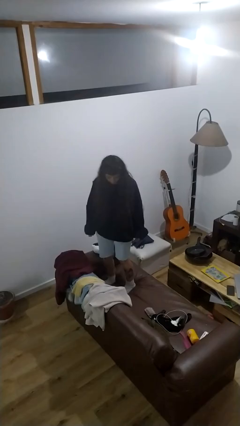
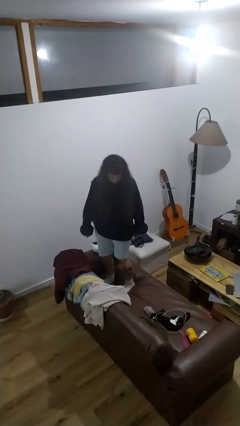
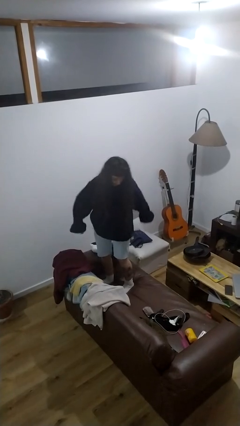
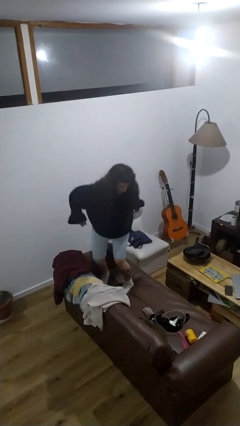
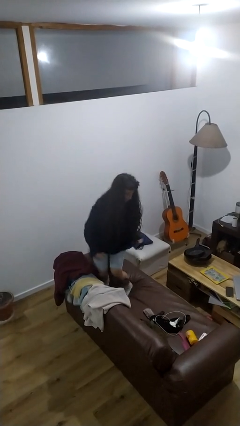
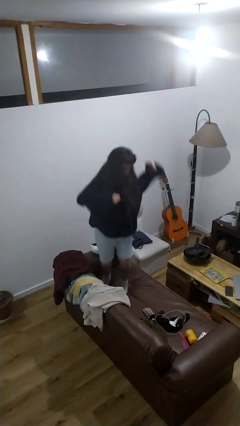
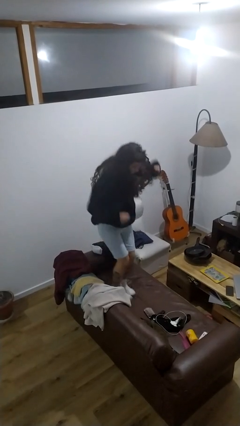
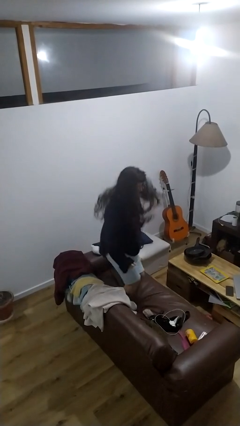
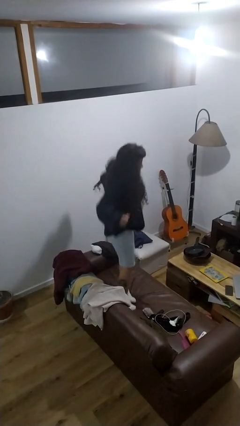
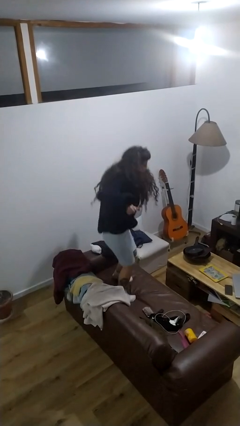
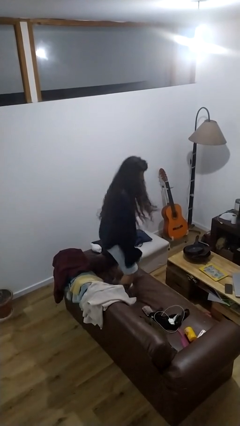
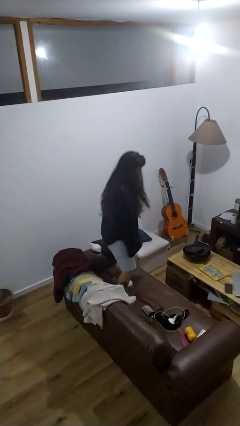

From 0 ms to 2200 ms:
person jumps on couch

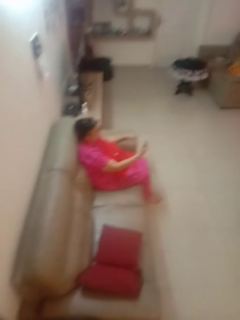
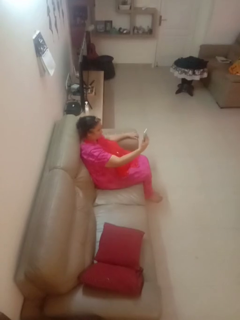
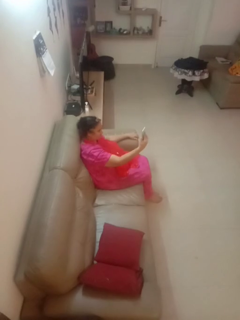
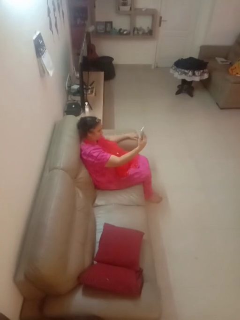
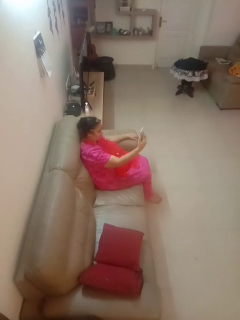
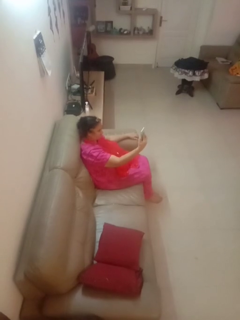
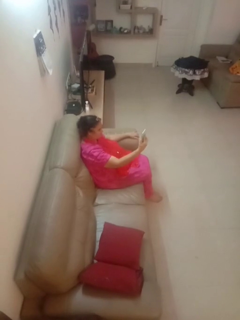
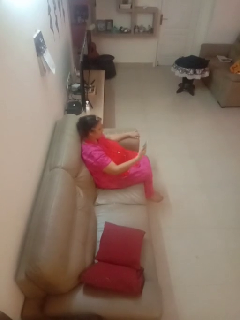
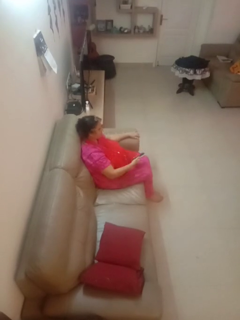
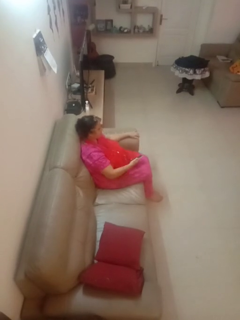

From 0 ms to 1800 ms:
person takes selfie

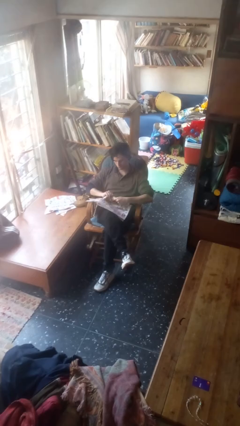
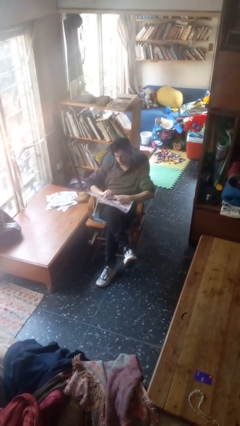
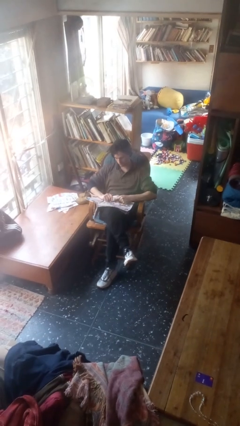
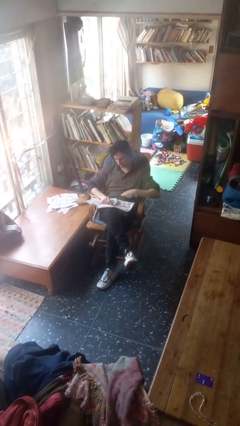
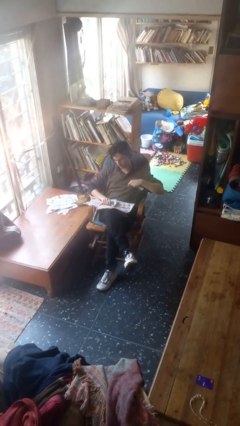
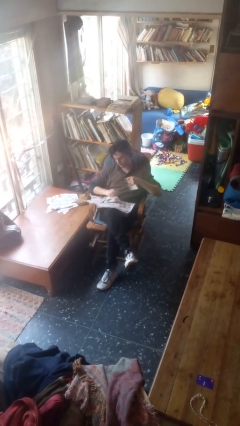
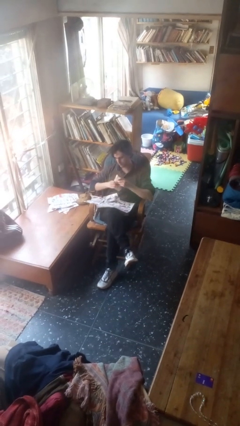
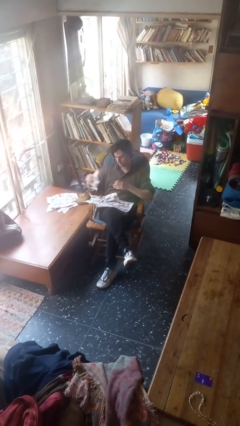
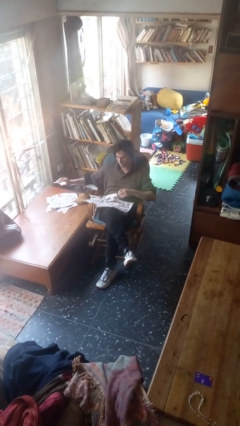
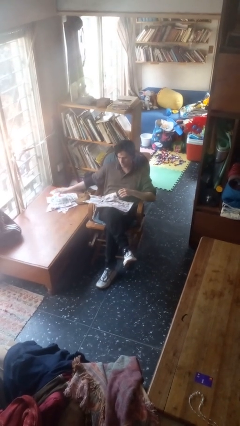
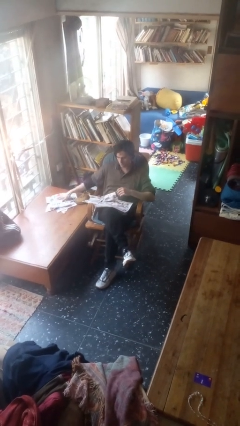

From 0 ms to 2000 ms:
person tears paper

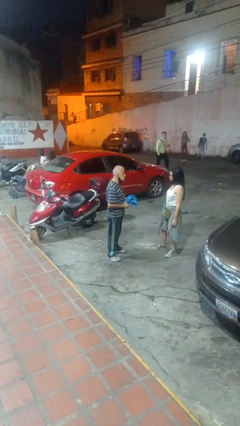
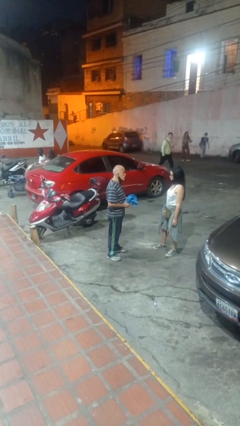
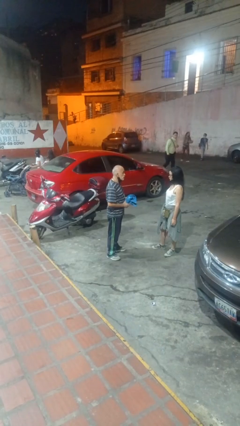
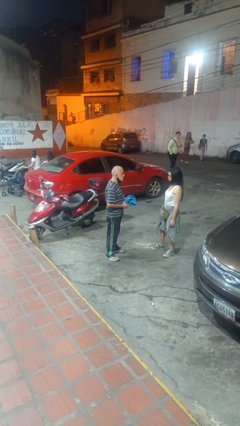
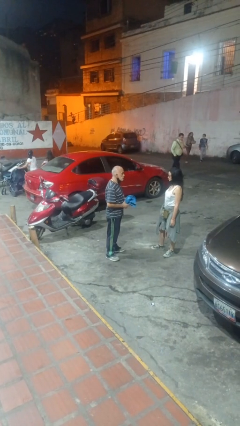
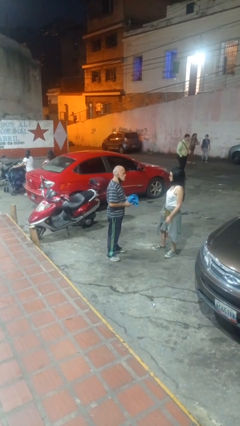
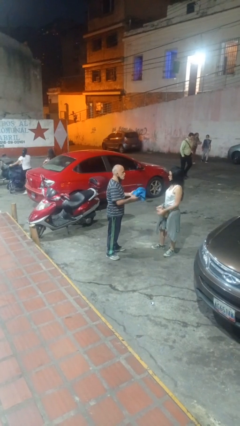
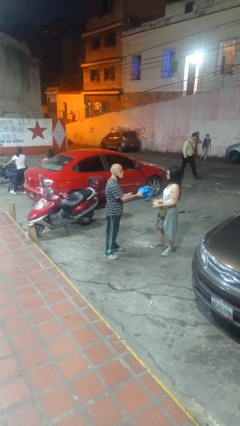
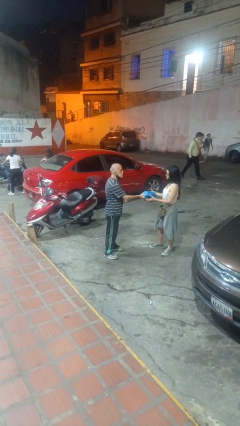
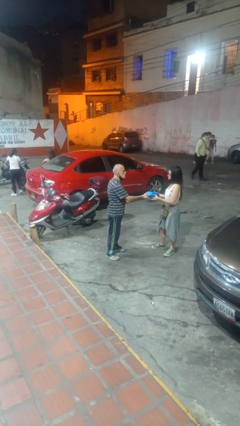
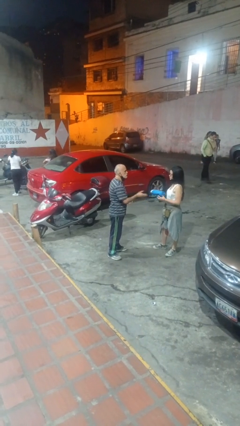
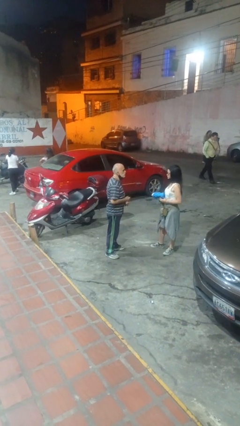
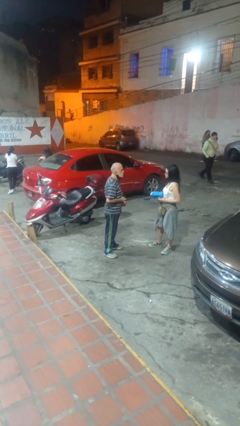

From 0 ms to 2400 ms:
person transfers object to person

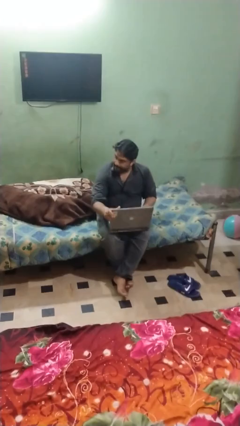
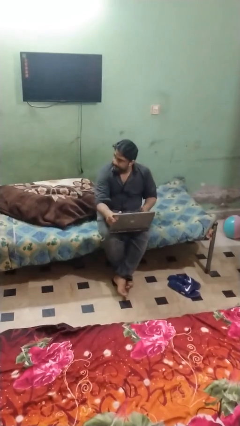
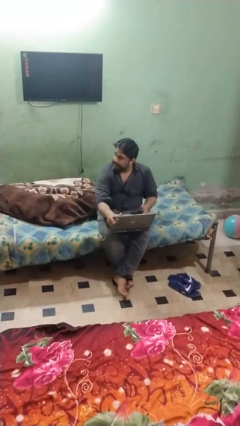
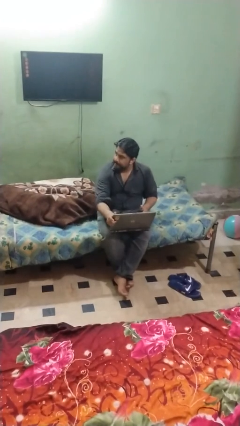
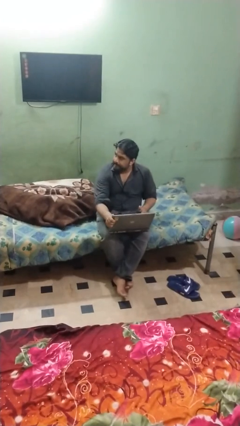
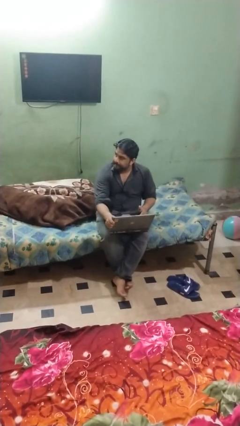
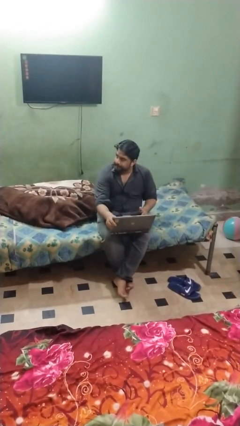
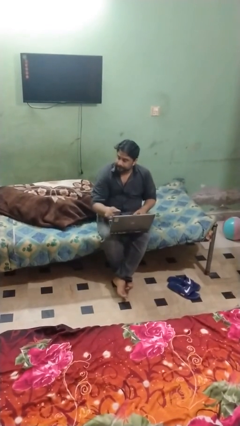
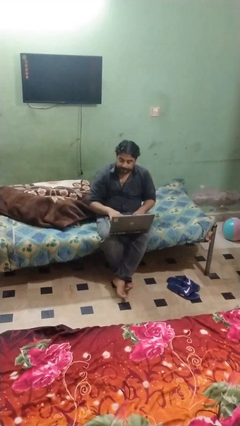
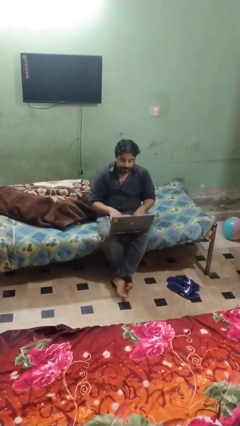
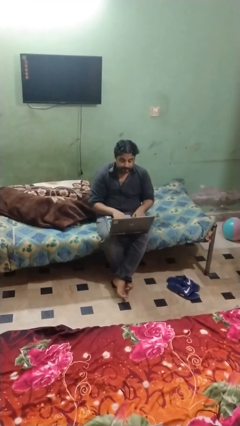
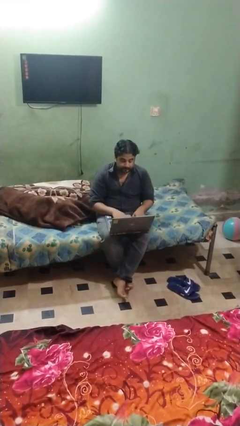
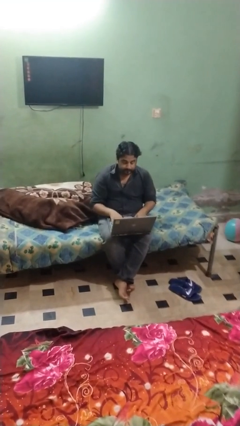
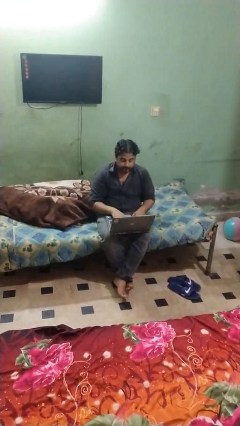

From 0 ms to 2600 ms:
person opens laptop

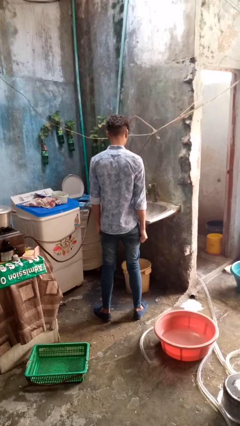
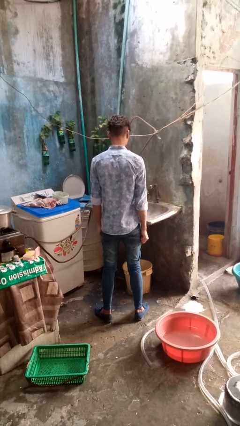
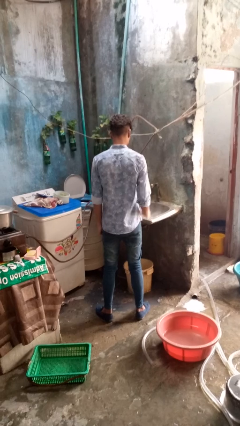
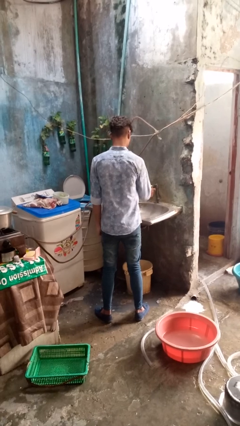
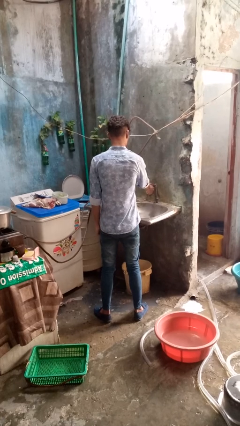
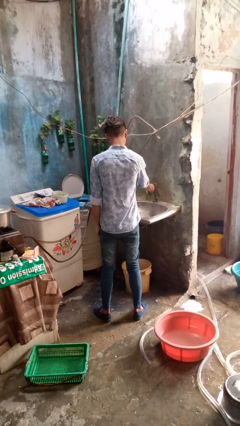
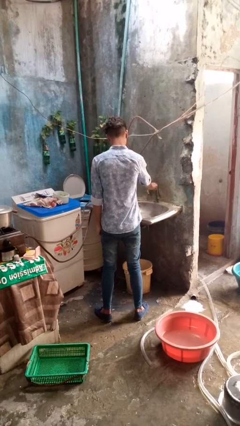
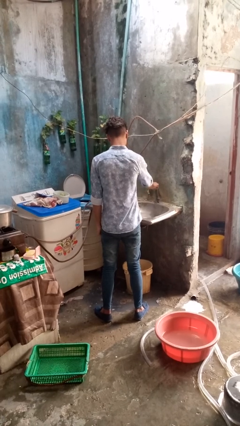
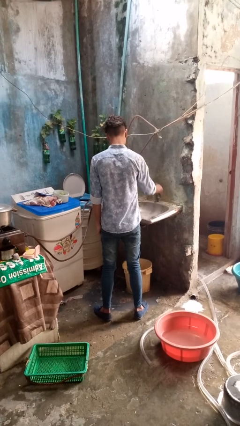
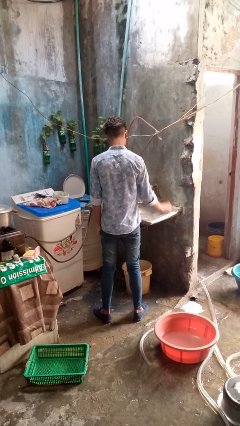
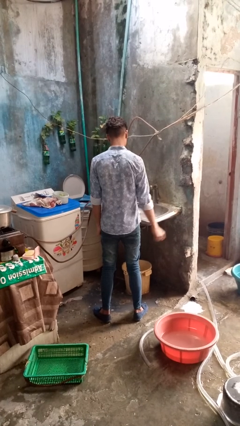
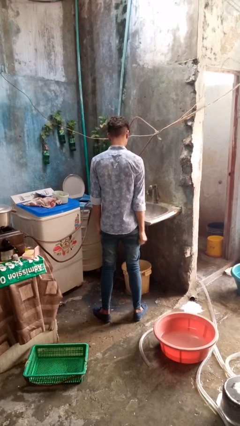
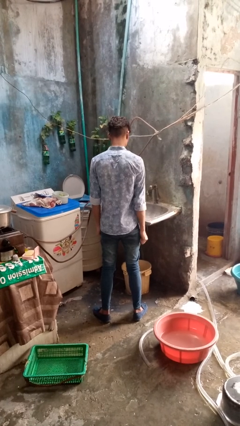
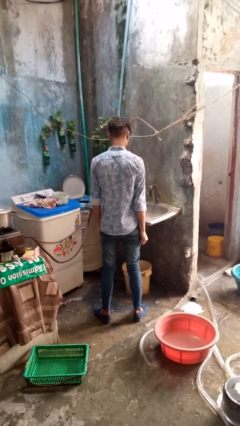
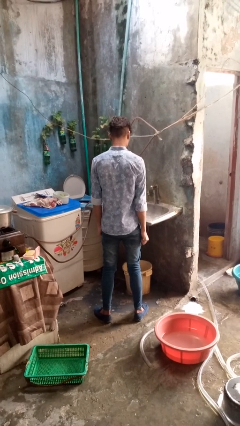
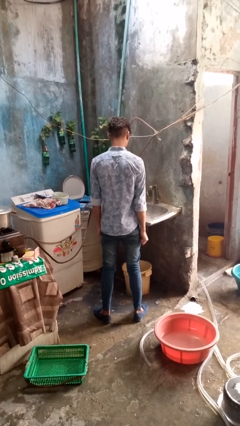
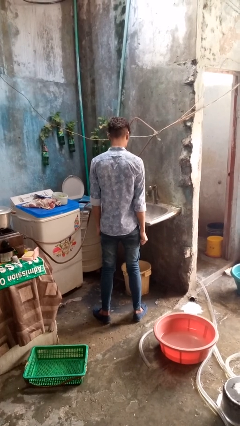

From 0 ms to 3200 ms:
person turns on faucet

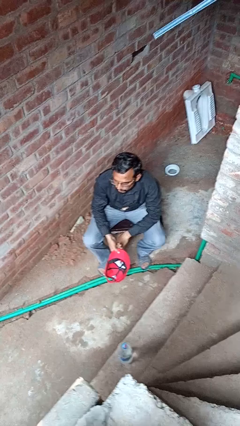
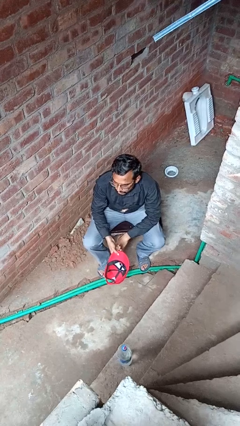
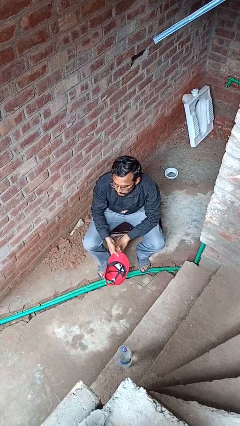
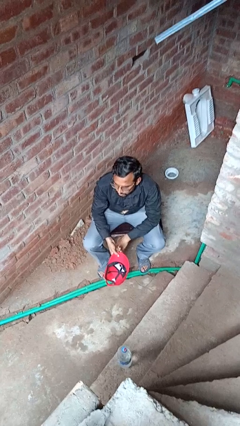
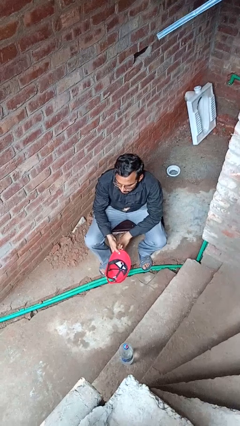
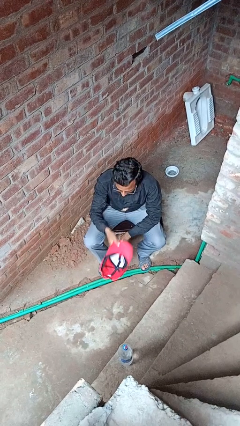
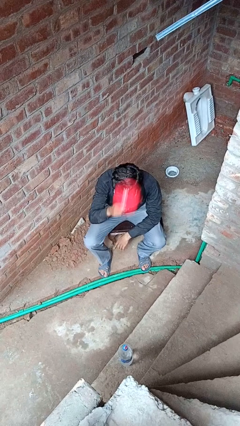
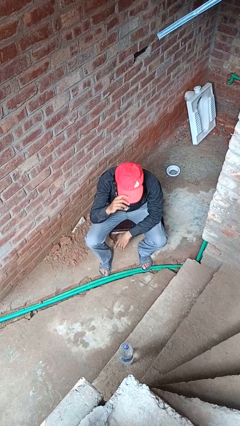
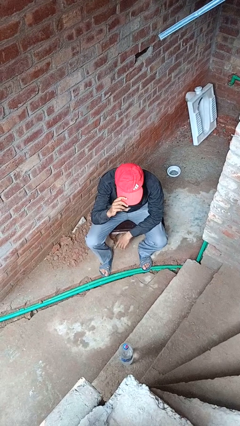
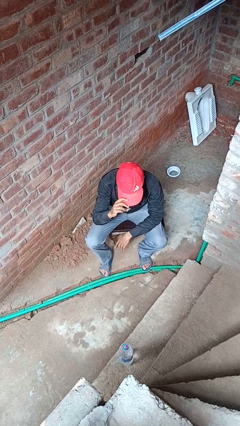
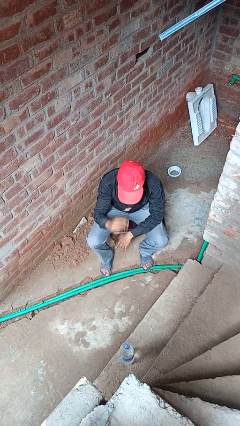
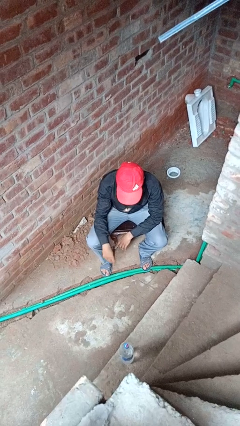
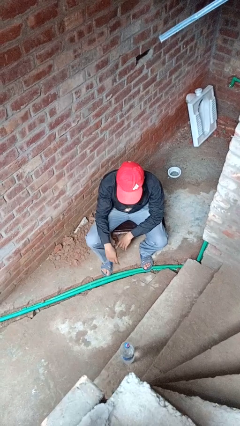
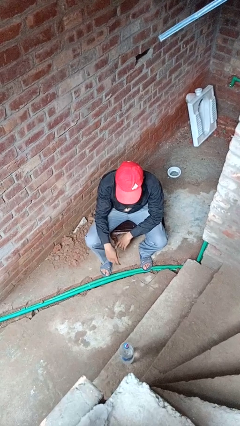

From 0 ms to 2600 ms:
person puts on hat

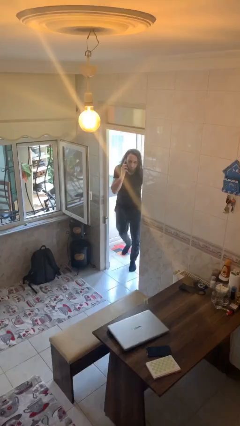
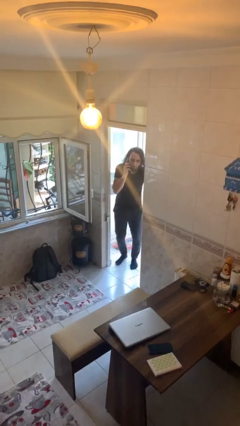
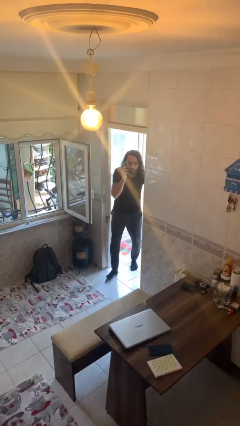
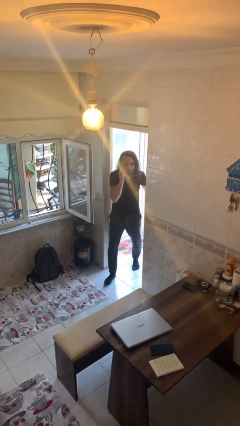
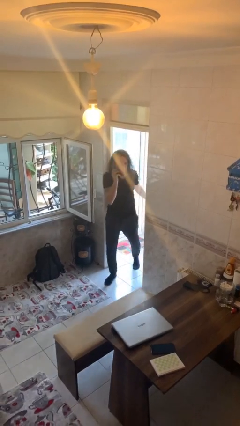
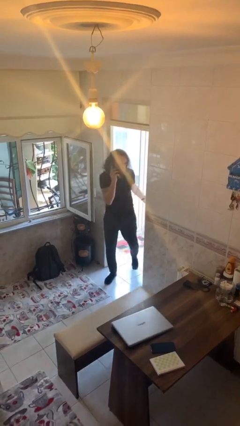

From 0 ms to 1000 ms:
person enters scene through structure
